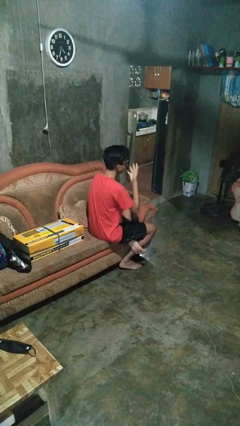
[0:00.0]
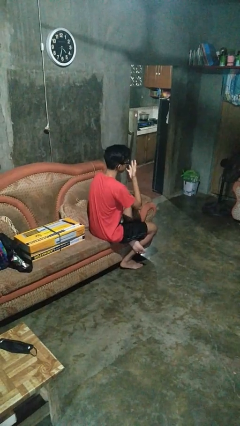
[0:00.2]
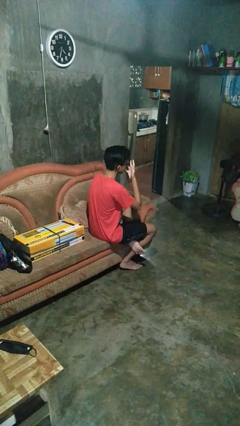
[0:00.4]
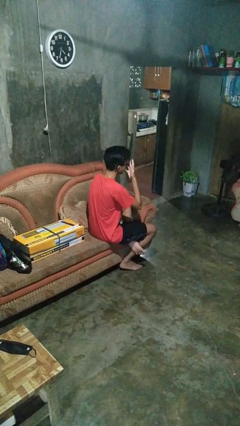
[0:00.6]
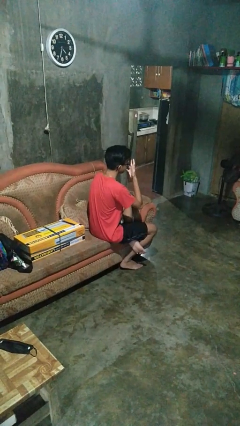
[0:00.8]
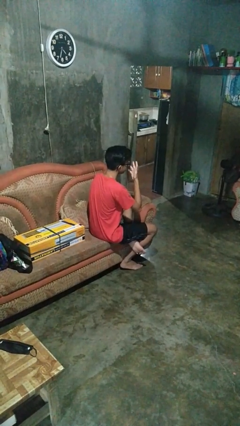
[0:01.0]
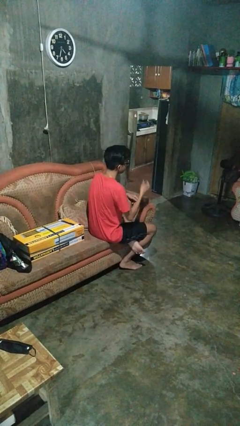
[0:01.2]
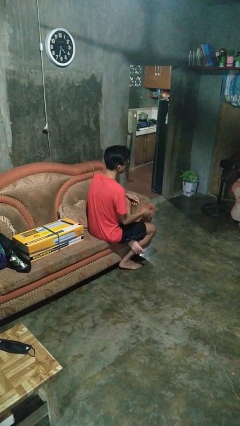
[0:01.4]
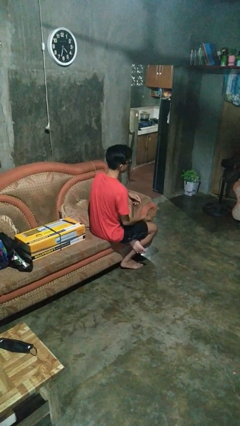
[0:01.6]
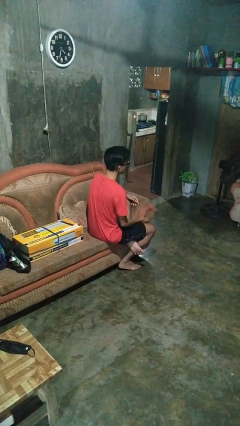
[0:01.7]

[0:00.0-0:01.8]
person licks fingers

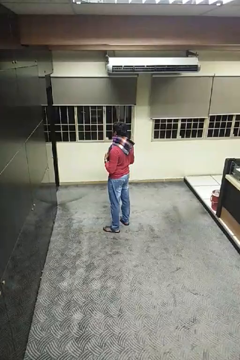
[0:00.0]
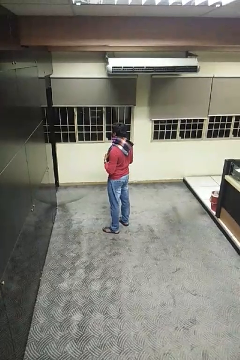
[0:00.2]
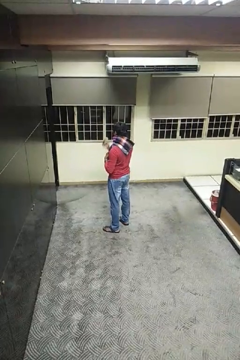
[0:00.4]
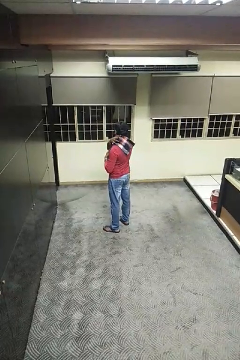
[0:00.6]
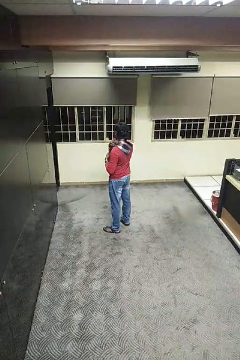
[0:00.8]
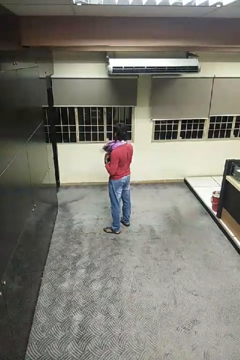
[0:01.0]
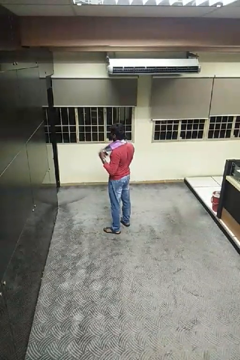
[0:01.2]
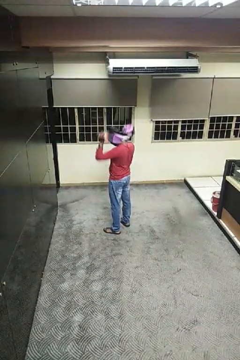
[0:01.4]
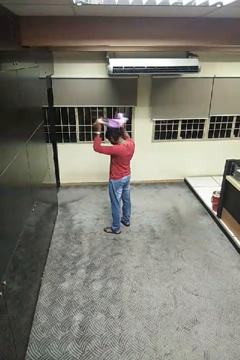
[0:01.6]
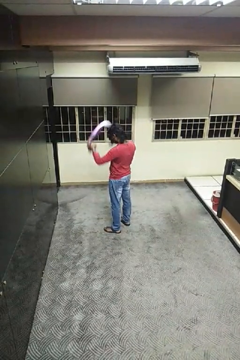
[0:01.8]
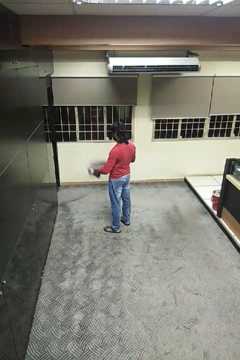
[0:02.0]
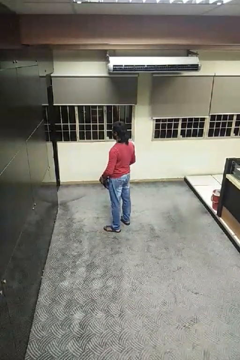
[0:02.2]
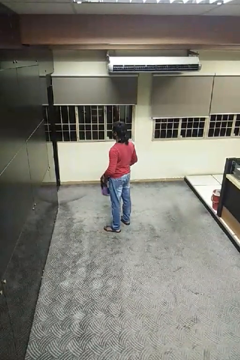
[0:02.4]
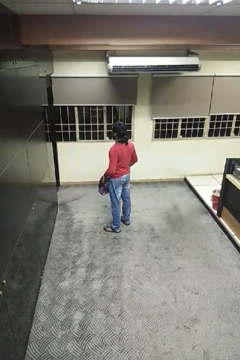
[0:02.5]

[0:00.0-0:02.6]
person takes off scarf

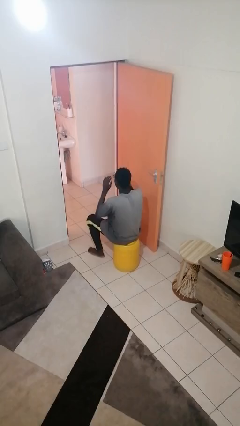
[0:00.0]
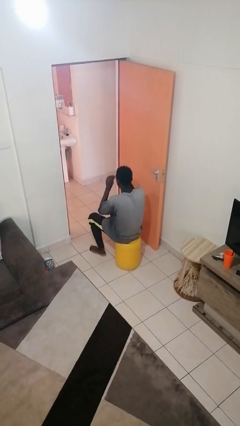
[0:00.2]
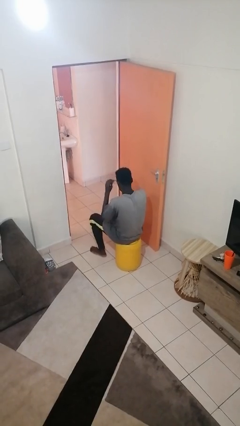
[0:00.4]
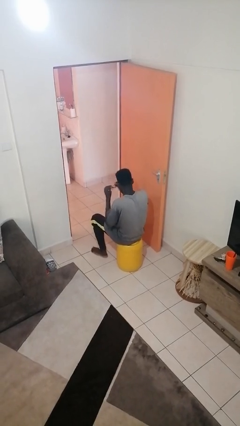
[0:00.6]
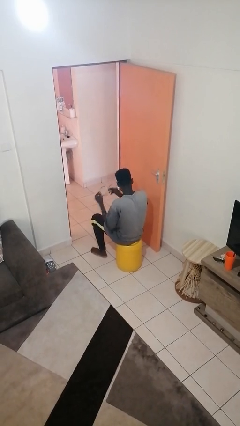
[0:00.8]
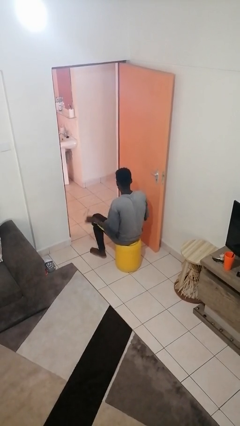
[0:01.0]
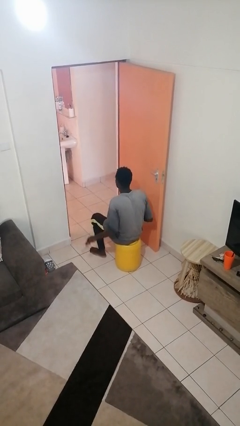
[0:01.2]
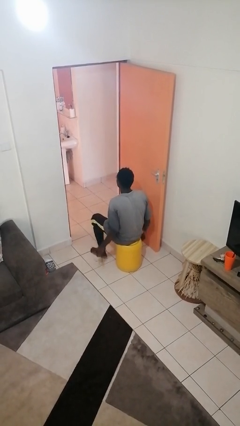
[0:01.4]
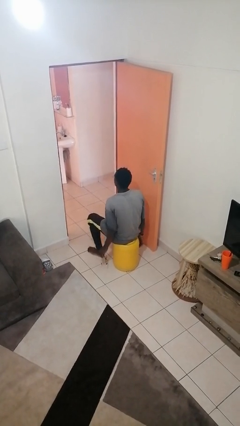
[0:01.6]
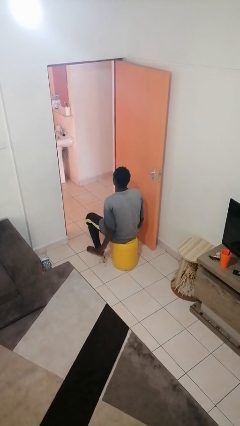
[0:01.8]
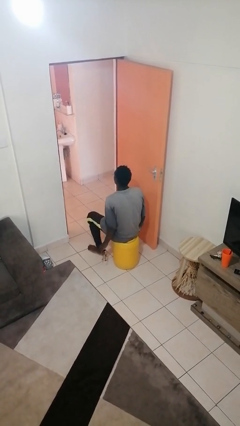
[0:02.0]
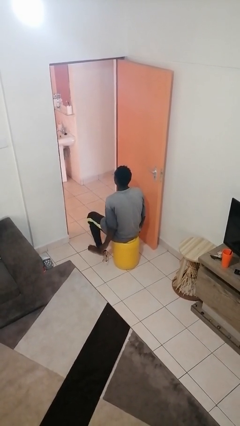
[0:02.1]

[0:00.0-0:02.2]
person takes off glasses

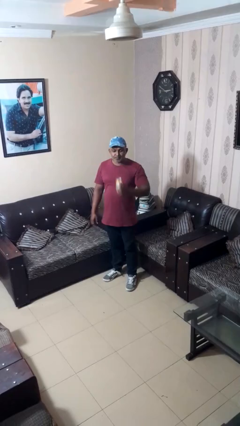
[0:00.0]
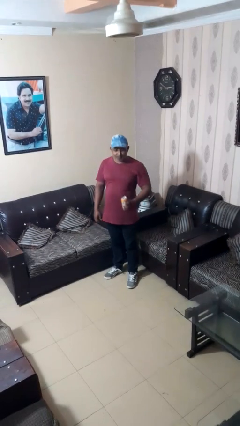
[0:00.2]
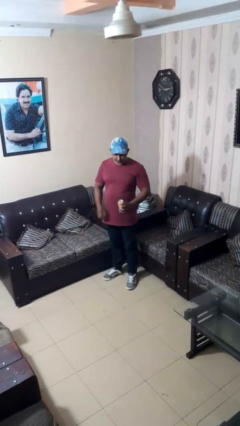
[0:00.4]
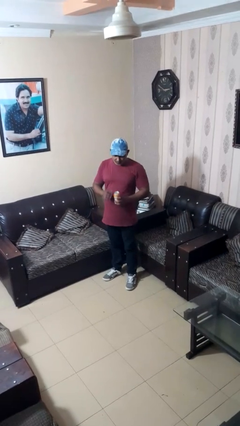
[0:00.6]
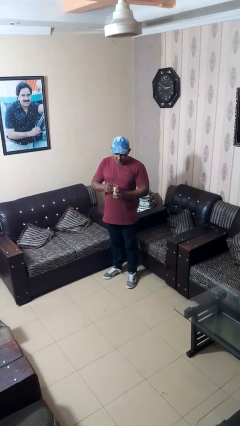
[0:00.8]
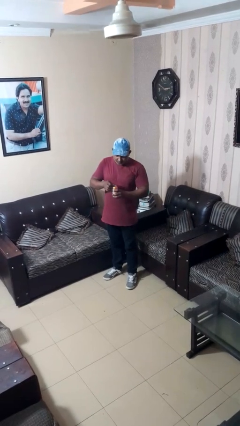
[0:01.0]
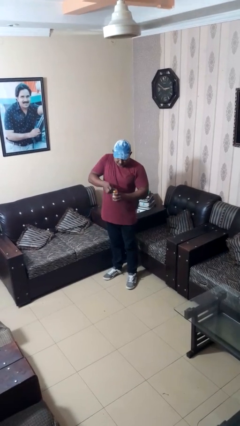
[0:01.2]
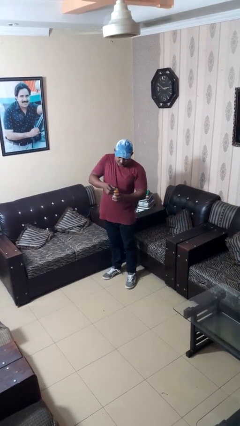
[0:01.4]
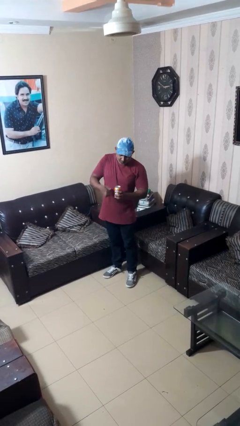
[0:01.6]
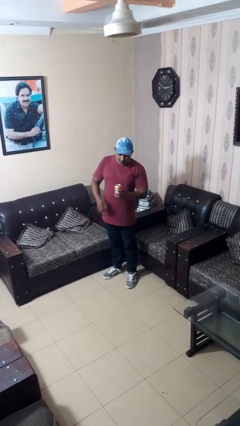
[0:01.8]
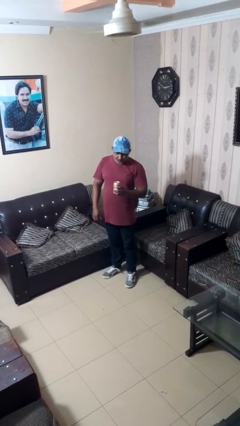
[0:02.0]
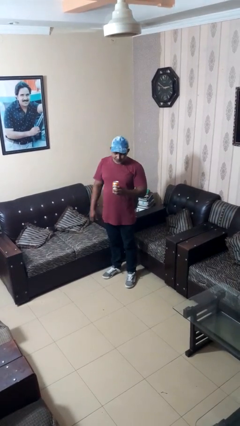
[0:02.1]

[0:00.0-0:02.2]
person opens beverage can

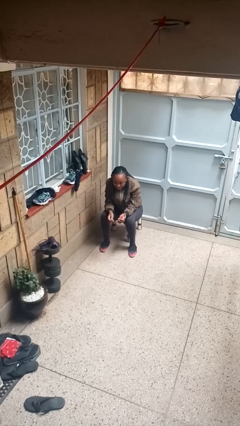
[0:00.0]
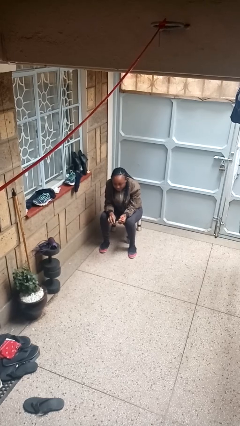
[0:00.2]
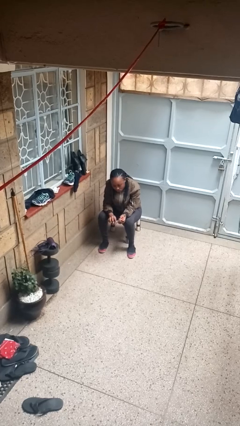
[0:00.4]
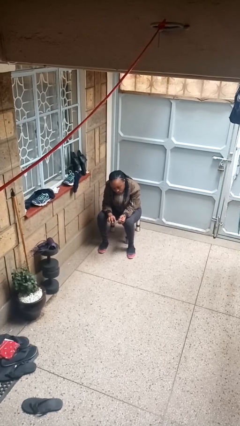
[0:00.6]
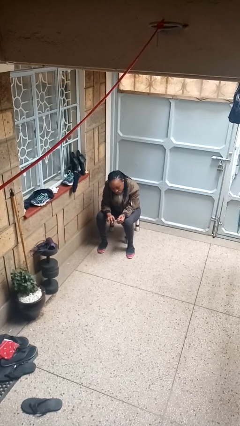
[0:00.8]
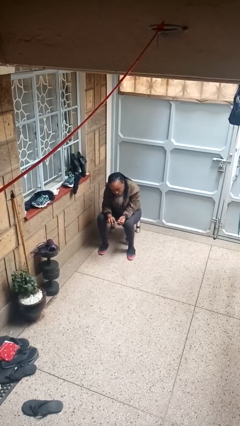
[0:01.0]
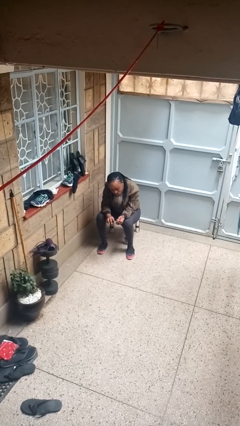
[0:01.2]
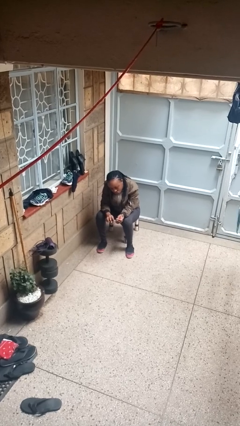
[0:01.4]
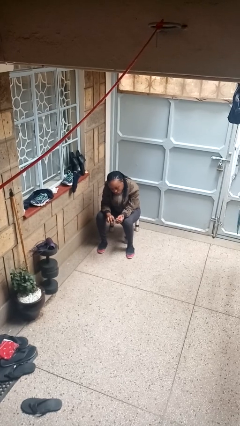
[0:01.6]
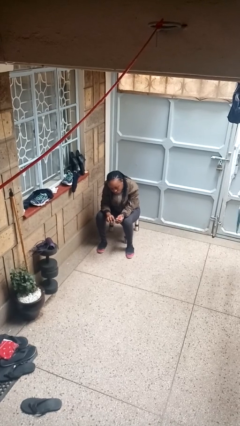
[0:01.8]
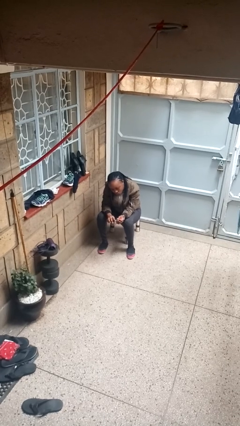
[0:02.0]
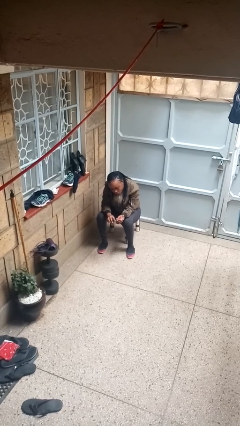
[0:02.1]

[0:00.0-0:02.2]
person paints fingernails

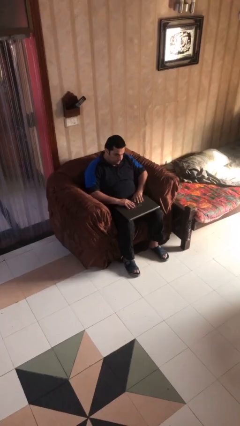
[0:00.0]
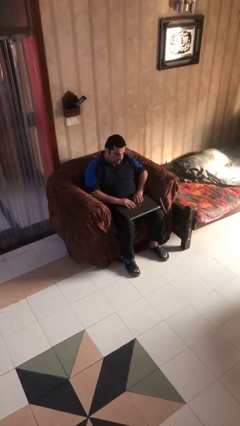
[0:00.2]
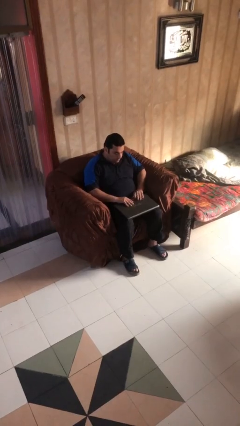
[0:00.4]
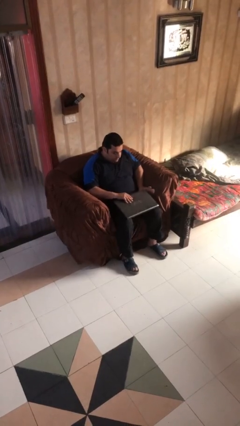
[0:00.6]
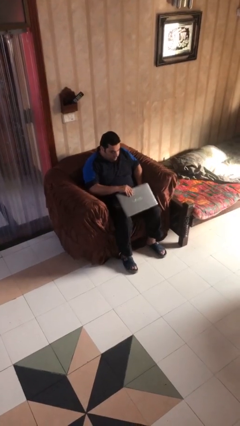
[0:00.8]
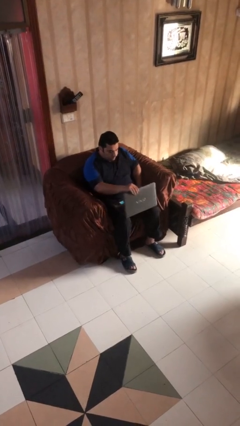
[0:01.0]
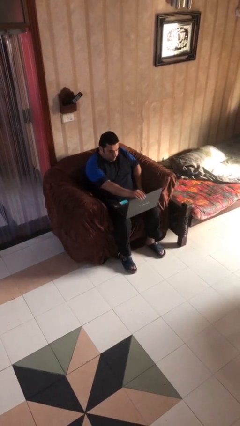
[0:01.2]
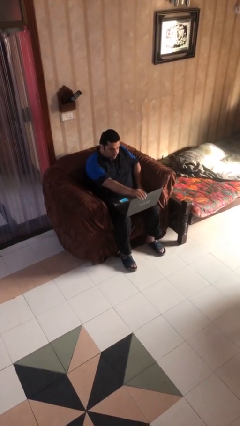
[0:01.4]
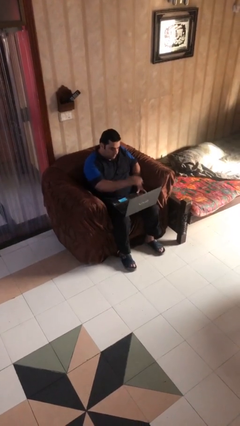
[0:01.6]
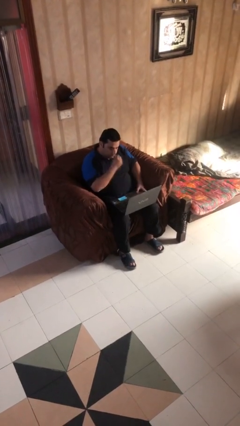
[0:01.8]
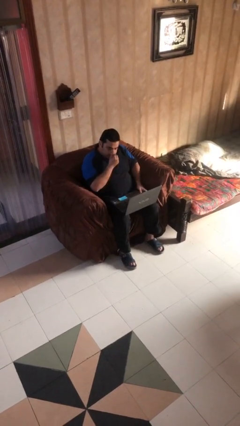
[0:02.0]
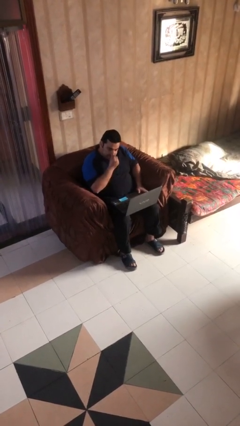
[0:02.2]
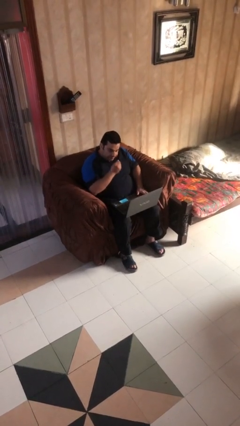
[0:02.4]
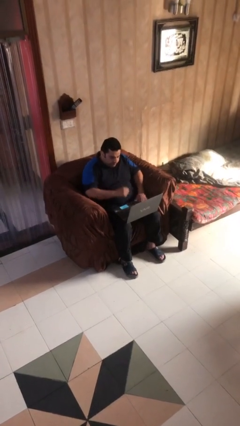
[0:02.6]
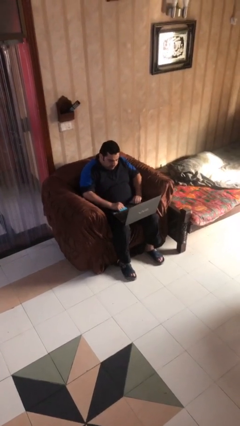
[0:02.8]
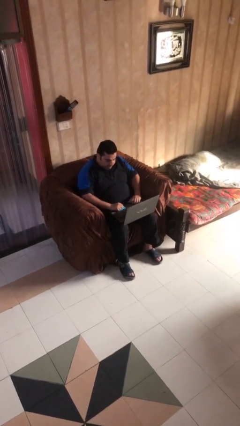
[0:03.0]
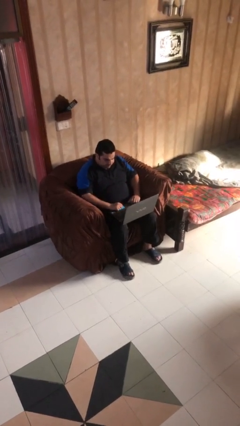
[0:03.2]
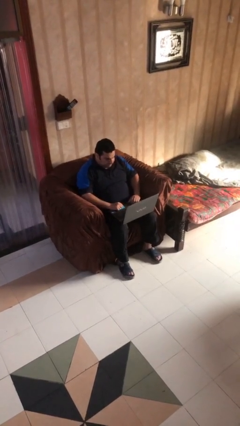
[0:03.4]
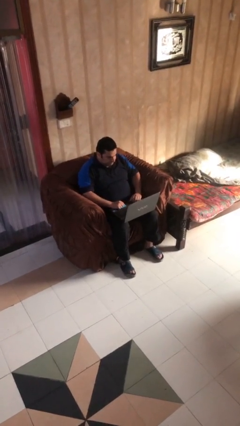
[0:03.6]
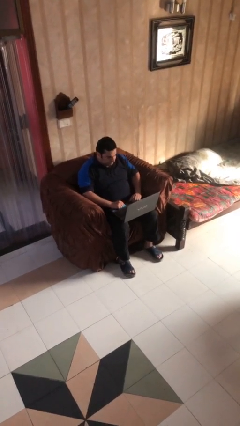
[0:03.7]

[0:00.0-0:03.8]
person opens laptop

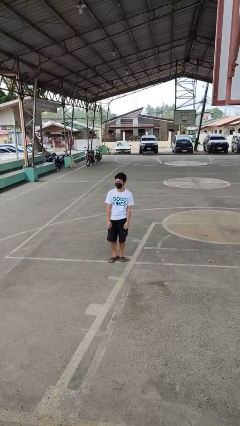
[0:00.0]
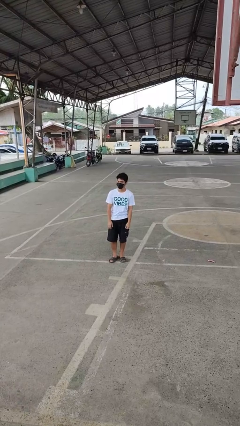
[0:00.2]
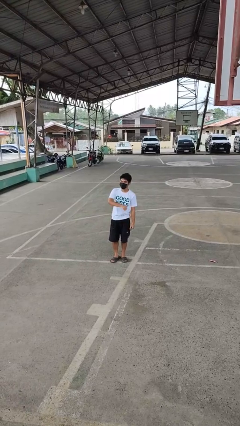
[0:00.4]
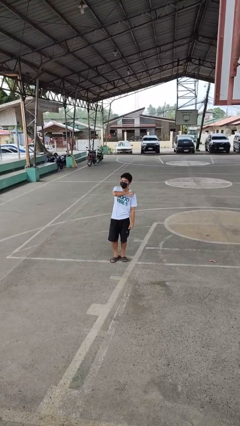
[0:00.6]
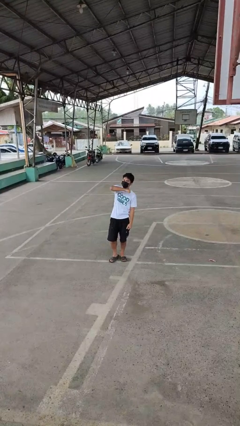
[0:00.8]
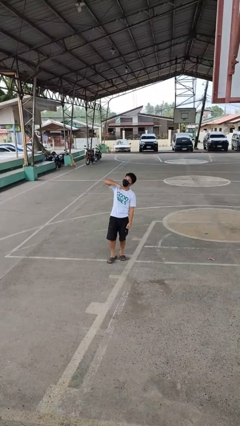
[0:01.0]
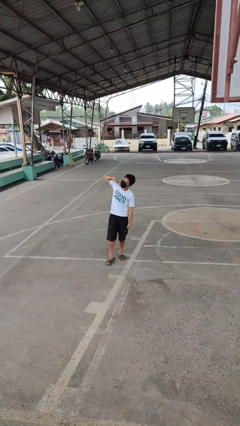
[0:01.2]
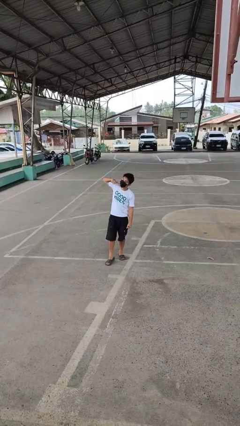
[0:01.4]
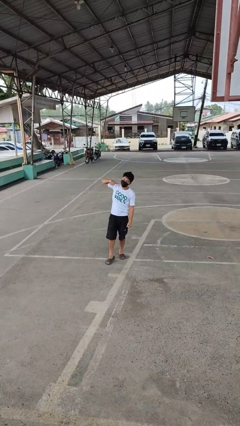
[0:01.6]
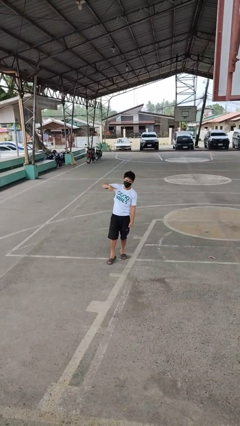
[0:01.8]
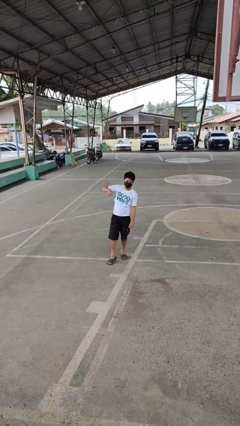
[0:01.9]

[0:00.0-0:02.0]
person gestures cut

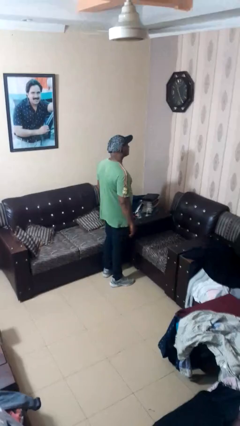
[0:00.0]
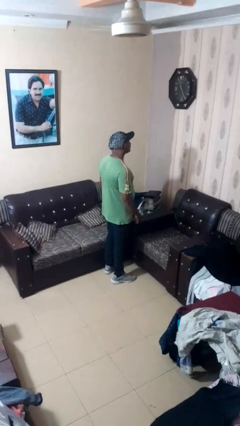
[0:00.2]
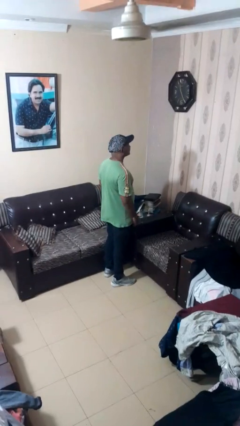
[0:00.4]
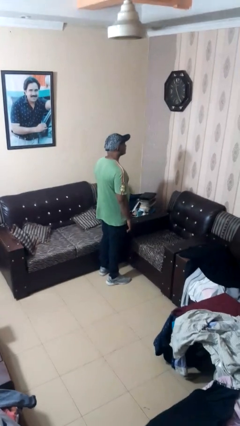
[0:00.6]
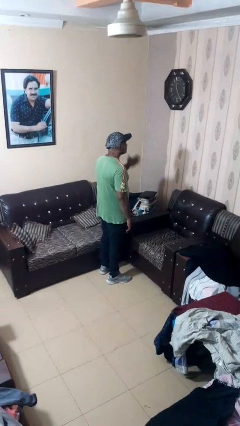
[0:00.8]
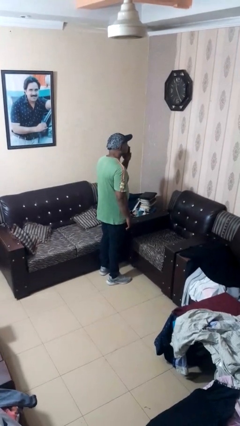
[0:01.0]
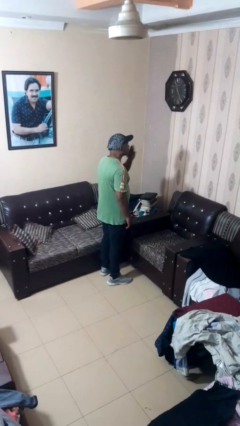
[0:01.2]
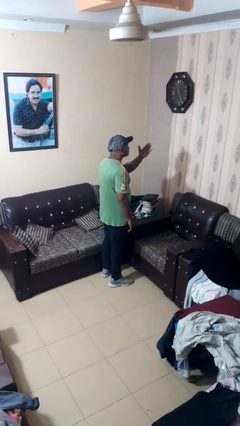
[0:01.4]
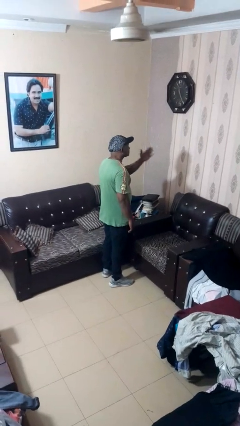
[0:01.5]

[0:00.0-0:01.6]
person gestures blow kiss
